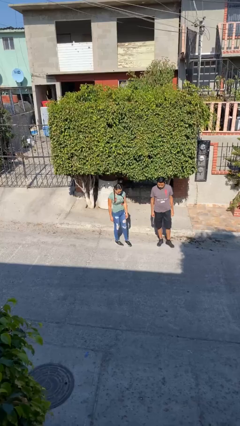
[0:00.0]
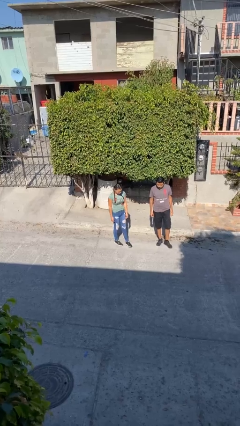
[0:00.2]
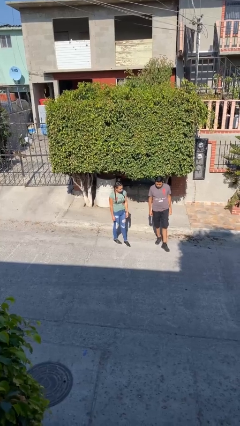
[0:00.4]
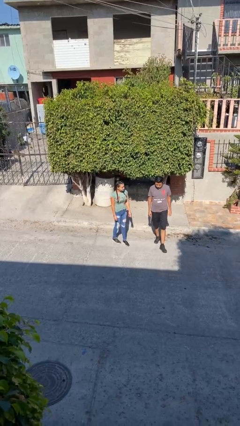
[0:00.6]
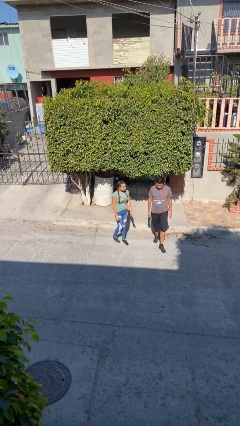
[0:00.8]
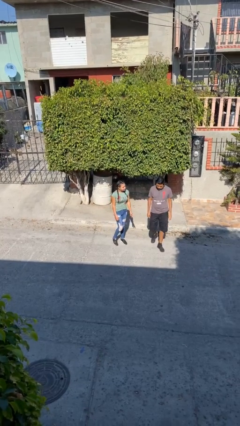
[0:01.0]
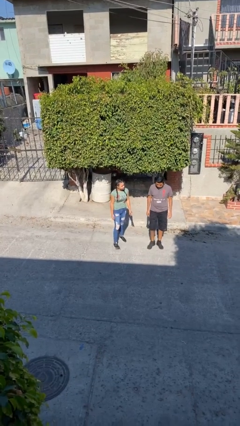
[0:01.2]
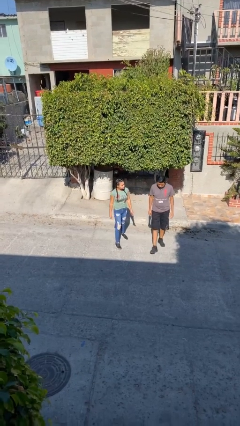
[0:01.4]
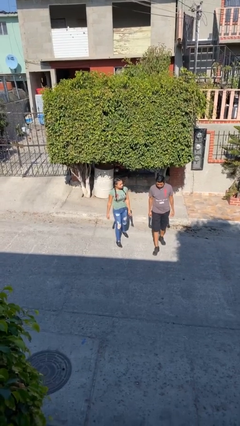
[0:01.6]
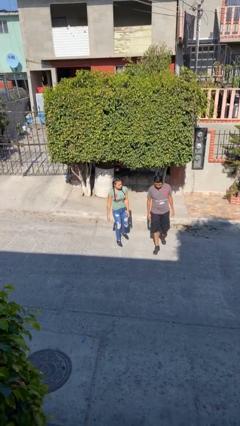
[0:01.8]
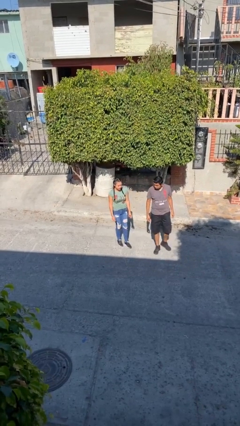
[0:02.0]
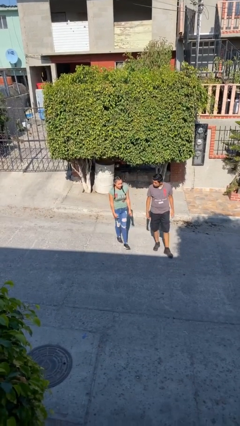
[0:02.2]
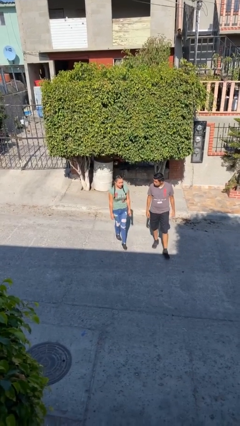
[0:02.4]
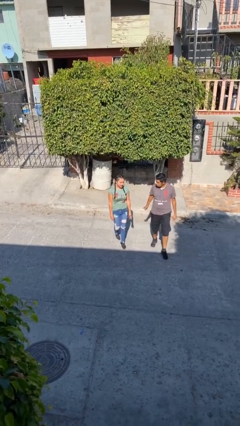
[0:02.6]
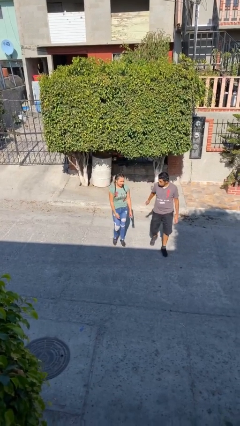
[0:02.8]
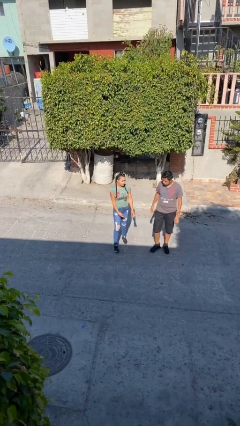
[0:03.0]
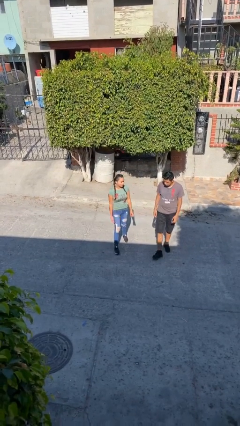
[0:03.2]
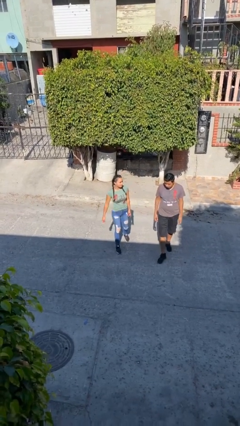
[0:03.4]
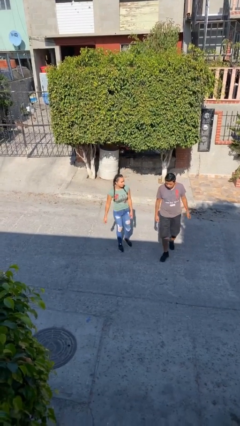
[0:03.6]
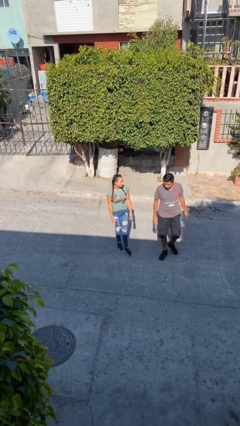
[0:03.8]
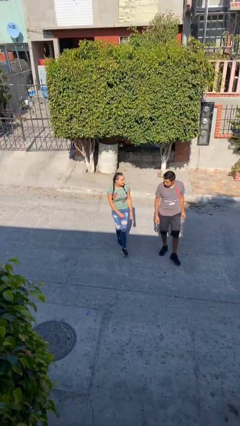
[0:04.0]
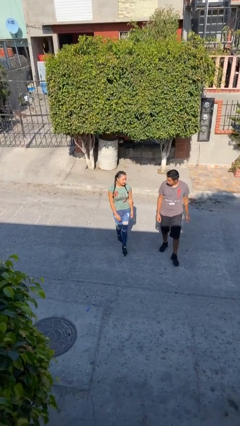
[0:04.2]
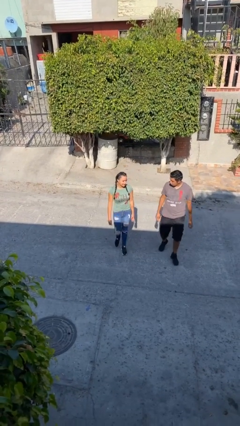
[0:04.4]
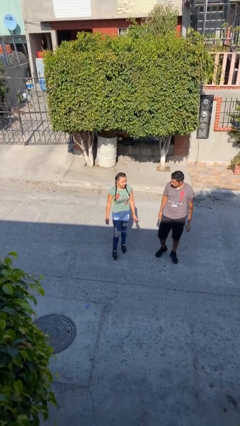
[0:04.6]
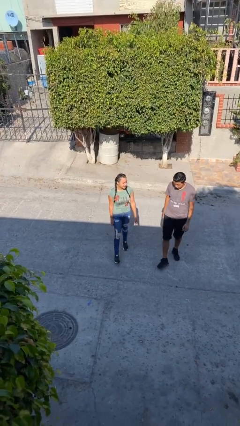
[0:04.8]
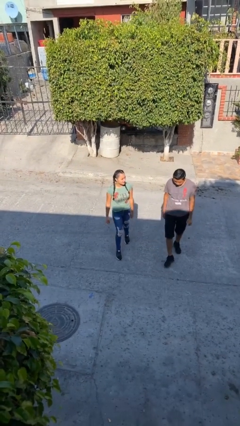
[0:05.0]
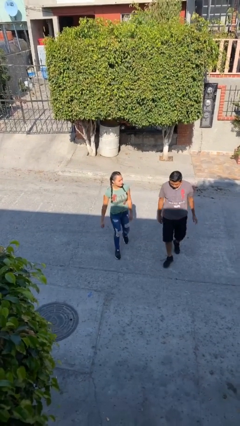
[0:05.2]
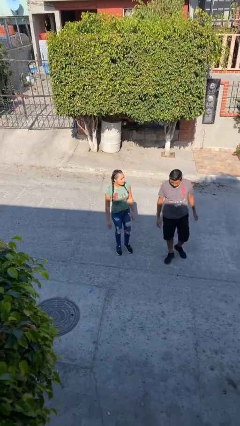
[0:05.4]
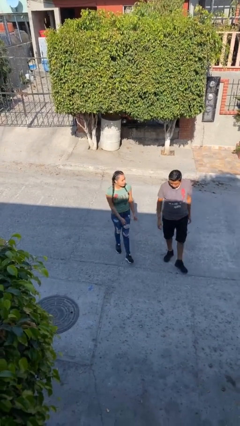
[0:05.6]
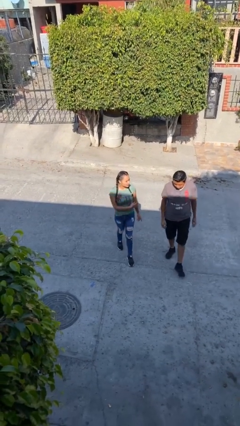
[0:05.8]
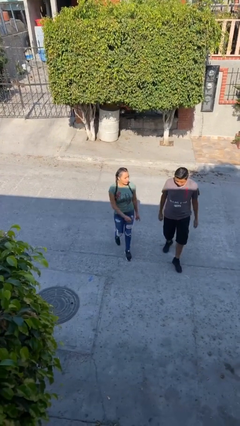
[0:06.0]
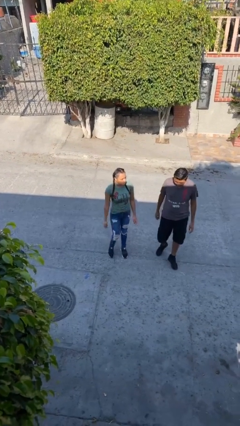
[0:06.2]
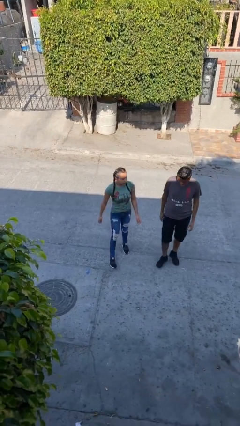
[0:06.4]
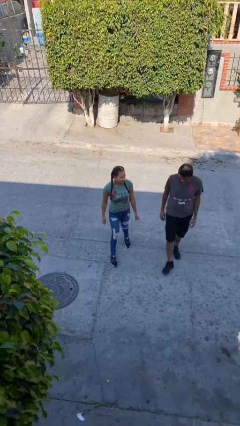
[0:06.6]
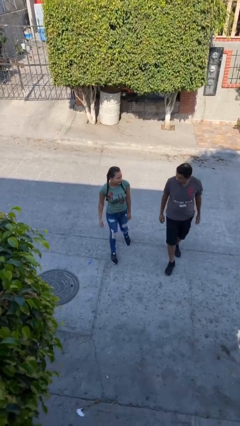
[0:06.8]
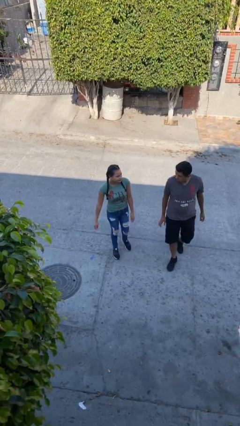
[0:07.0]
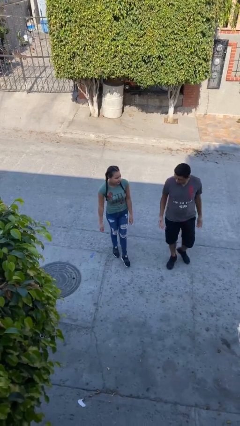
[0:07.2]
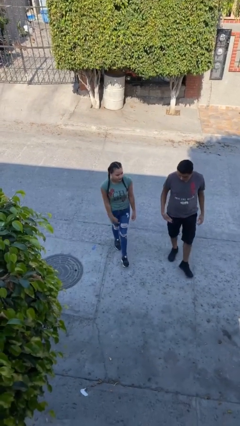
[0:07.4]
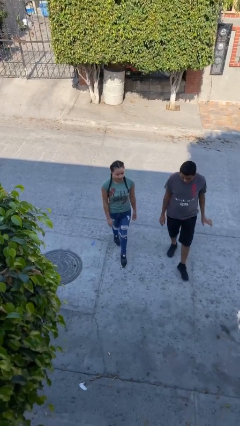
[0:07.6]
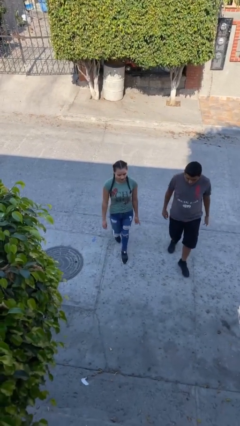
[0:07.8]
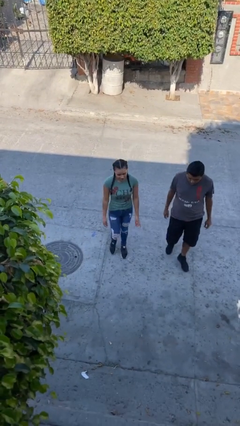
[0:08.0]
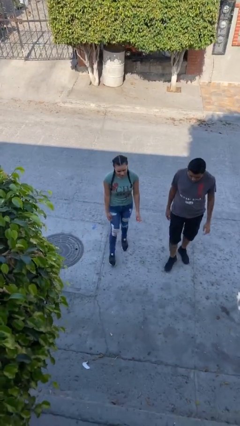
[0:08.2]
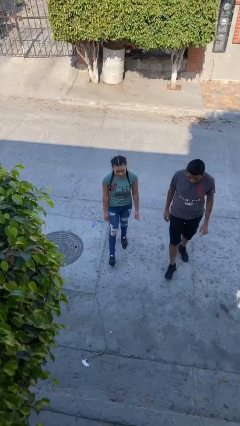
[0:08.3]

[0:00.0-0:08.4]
person talks to person

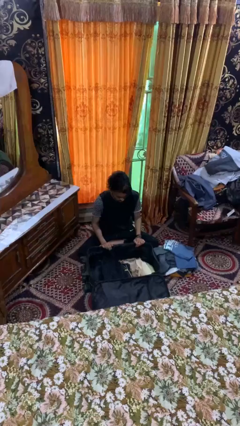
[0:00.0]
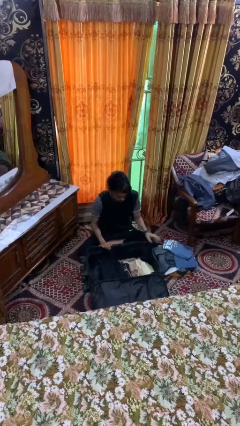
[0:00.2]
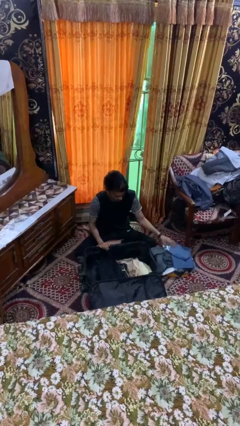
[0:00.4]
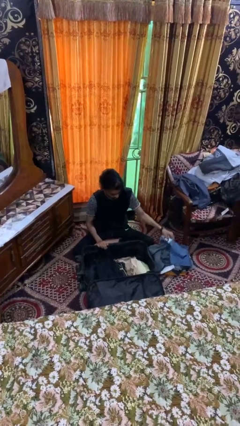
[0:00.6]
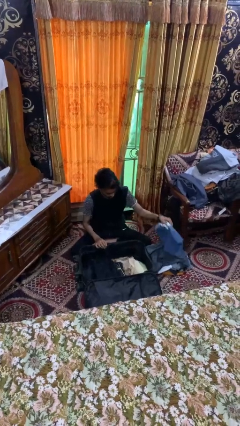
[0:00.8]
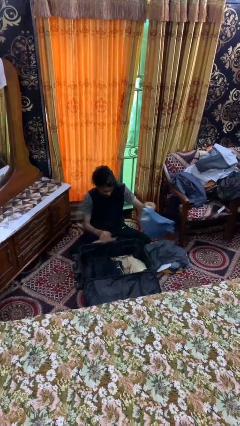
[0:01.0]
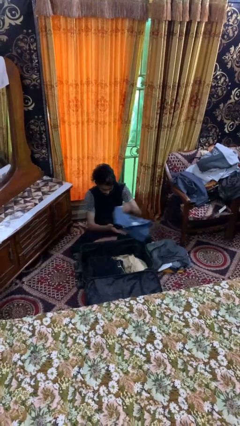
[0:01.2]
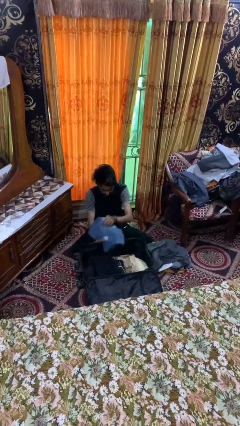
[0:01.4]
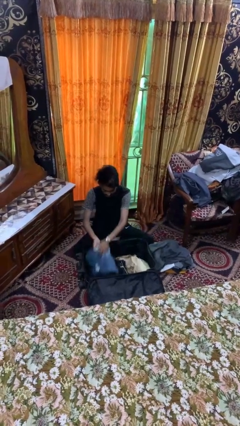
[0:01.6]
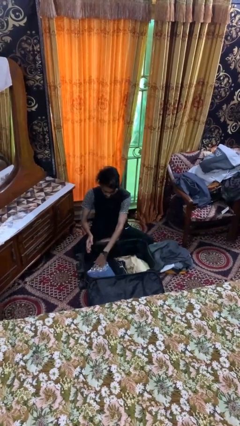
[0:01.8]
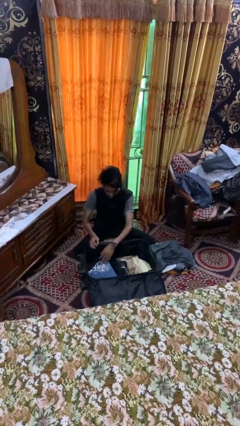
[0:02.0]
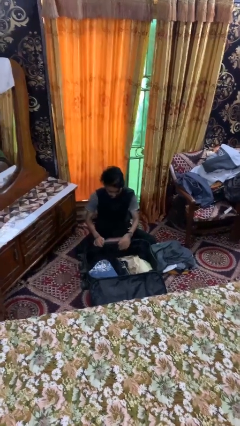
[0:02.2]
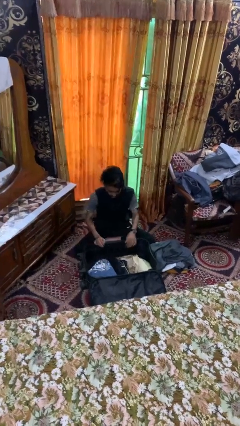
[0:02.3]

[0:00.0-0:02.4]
person loads clothes into suitcase

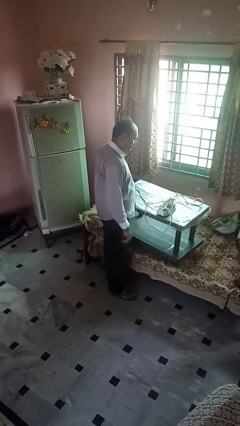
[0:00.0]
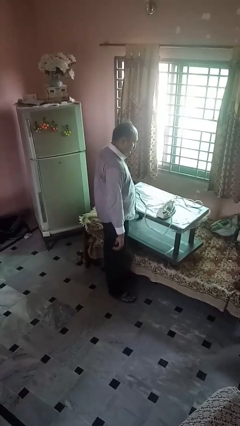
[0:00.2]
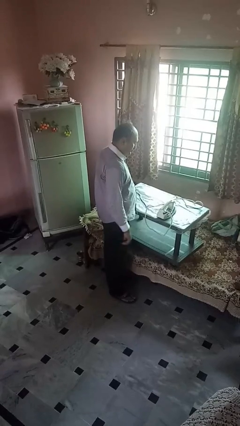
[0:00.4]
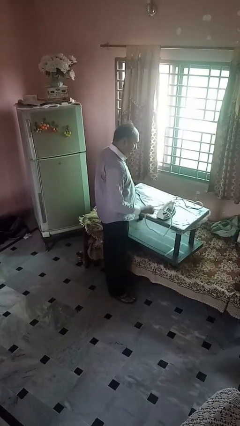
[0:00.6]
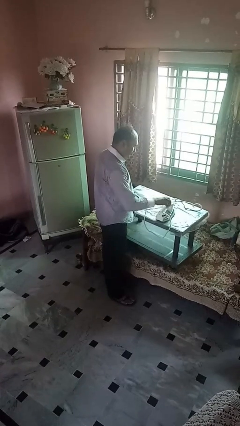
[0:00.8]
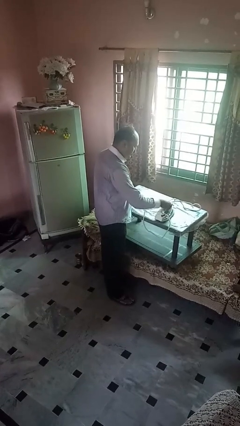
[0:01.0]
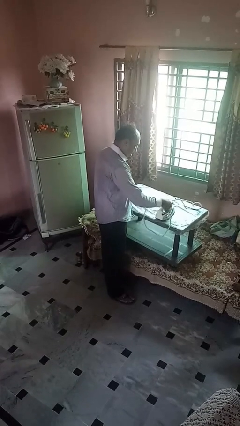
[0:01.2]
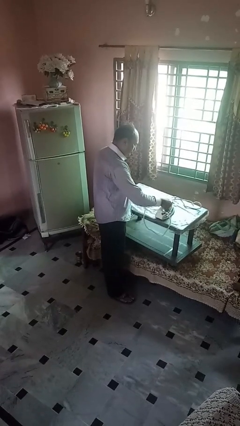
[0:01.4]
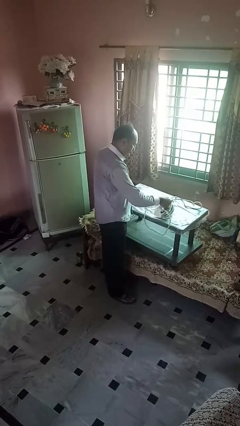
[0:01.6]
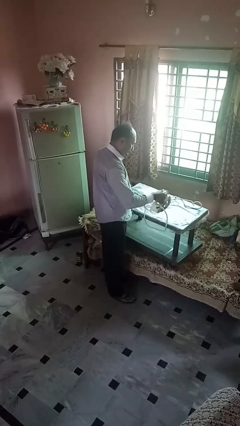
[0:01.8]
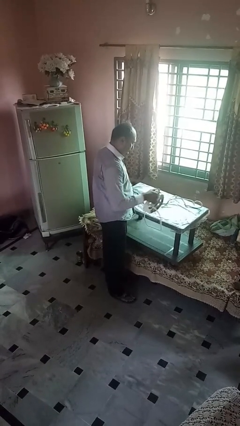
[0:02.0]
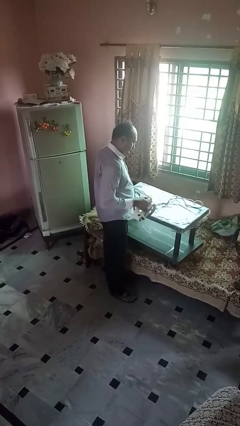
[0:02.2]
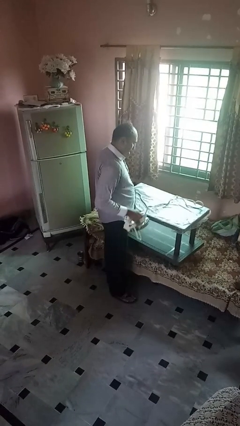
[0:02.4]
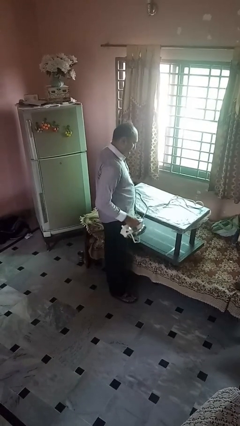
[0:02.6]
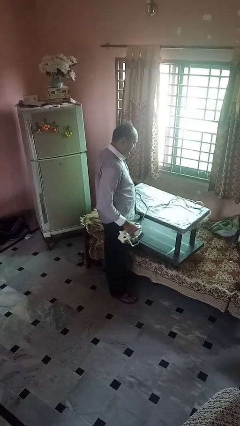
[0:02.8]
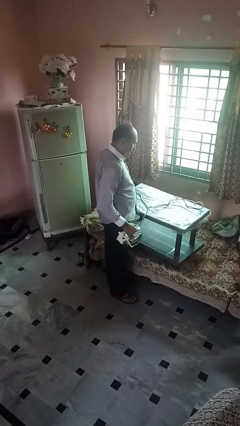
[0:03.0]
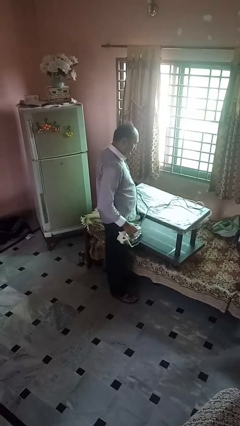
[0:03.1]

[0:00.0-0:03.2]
person picks up object from countertop

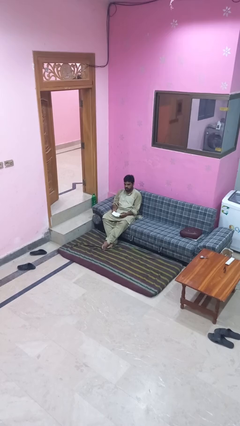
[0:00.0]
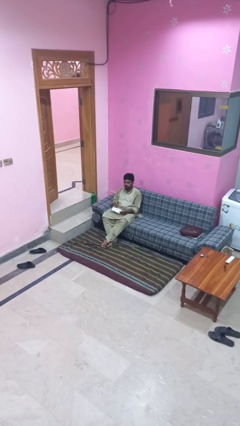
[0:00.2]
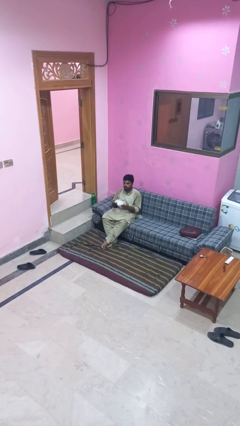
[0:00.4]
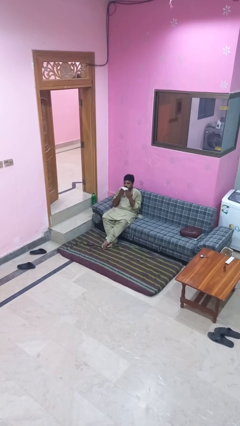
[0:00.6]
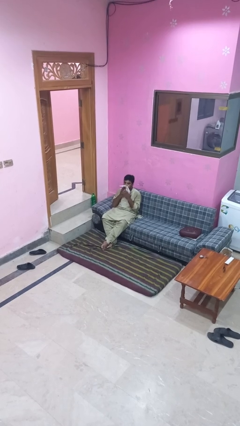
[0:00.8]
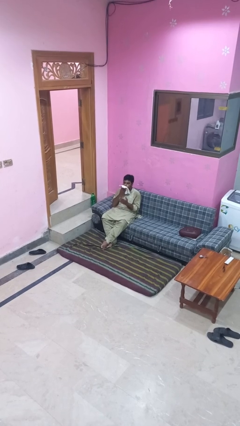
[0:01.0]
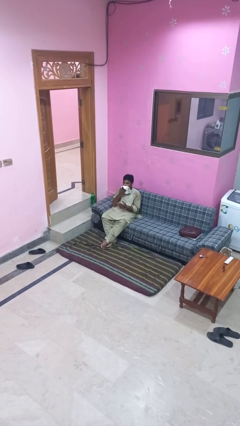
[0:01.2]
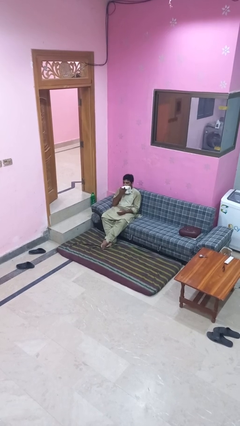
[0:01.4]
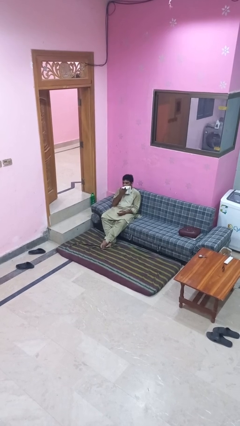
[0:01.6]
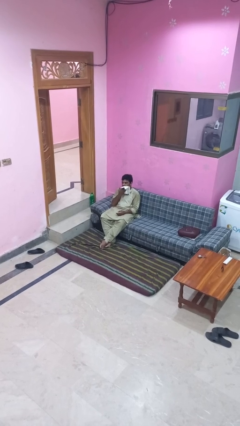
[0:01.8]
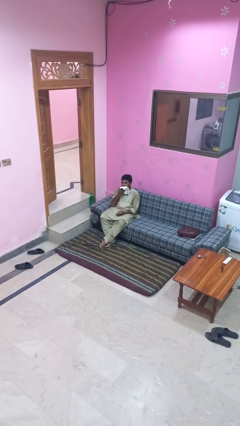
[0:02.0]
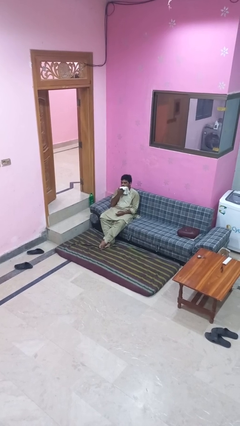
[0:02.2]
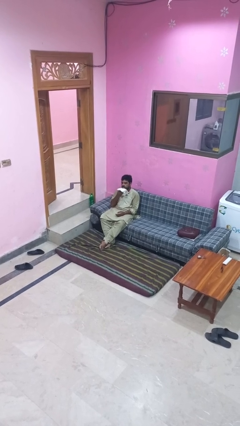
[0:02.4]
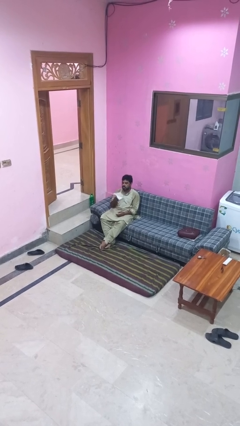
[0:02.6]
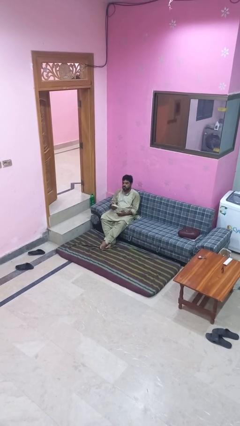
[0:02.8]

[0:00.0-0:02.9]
person wipes mouth with napkin

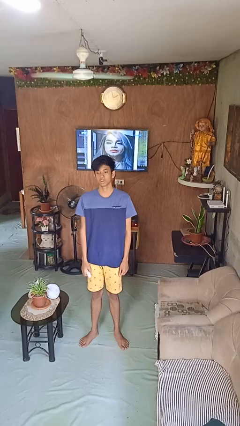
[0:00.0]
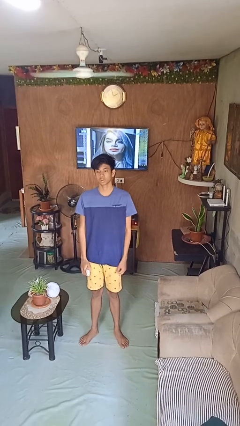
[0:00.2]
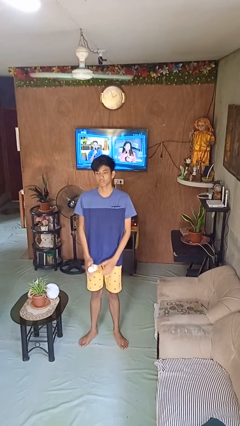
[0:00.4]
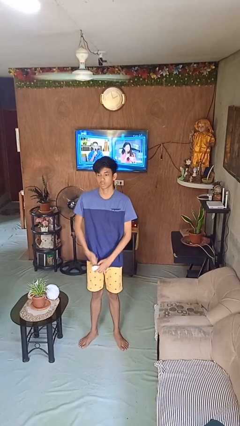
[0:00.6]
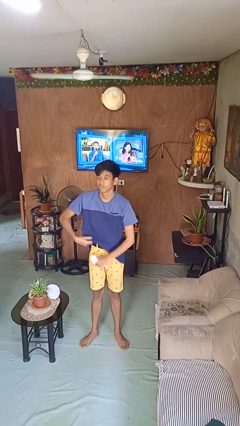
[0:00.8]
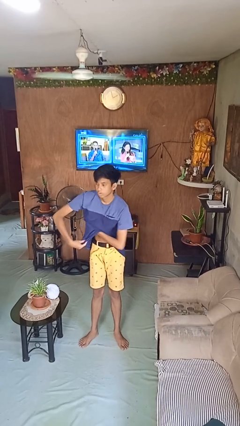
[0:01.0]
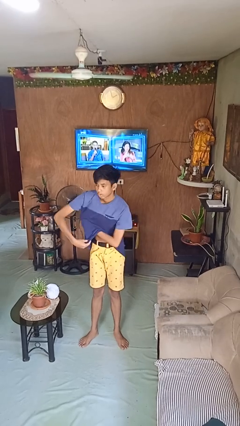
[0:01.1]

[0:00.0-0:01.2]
person applies deodorant

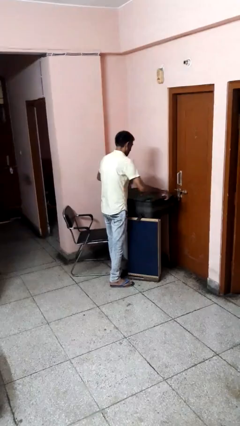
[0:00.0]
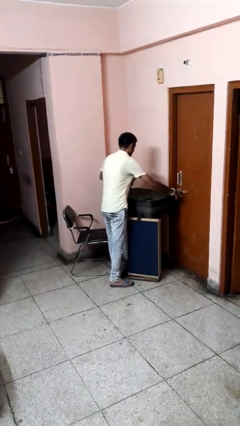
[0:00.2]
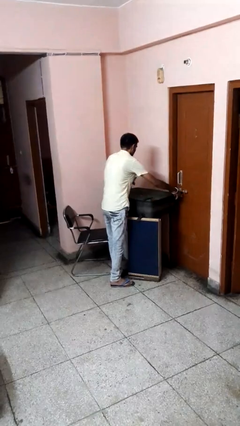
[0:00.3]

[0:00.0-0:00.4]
person closes suitcase
